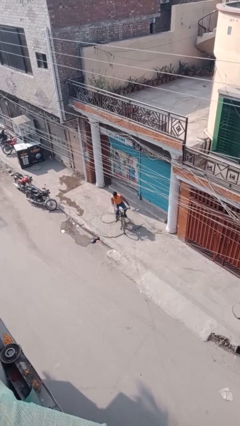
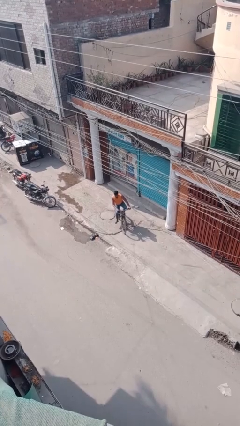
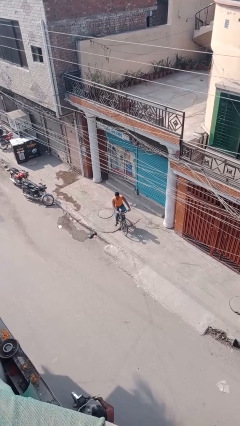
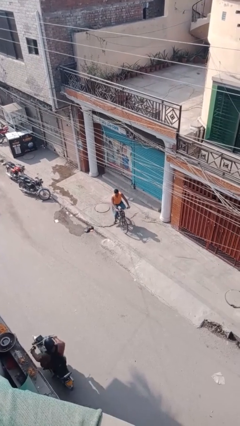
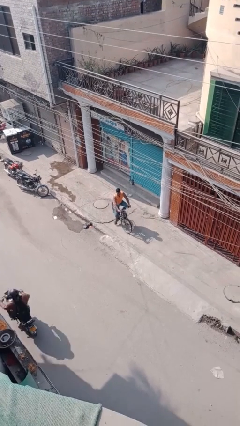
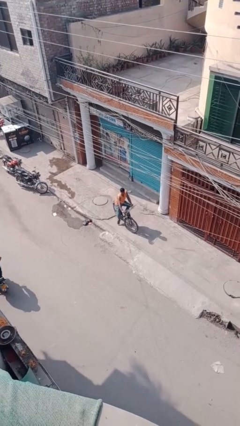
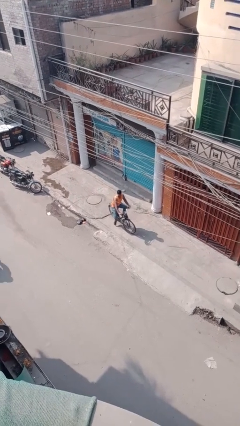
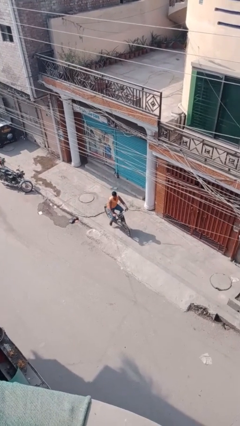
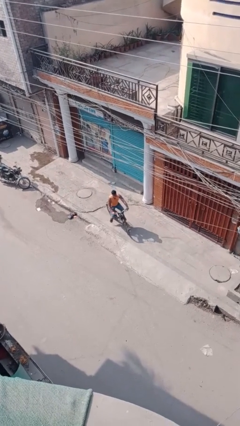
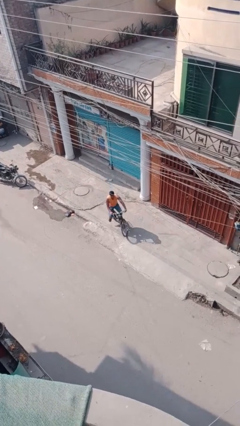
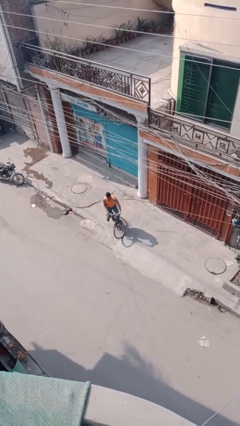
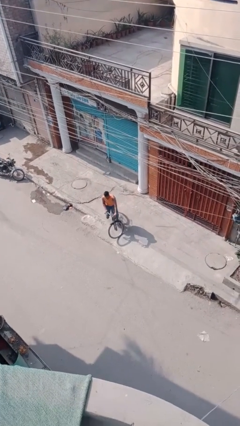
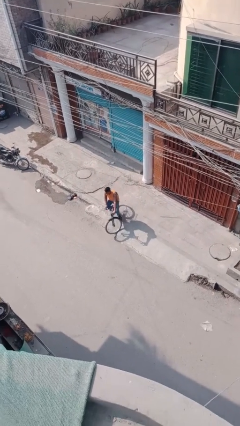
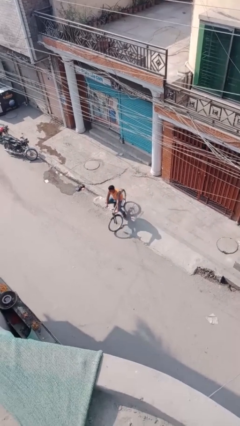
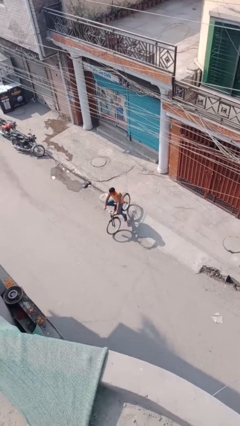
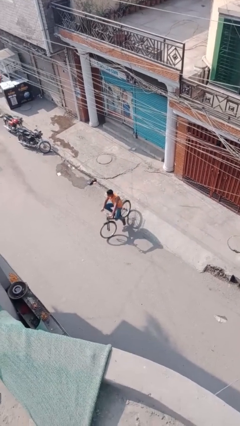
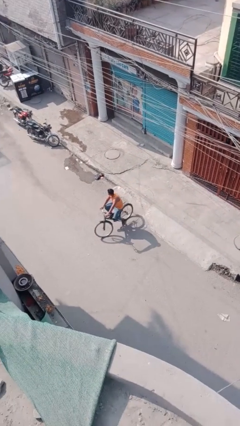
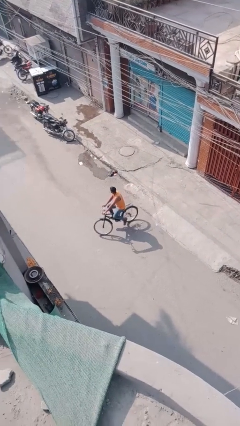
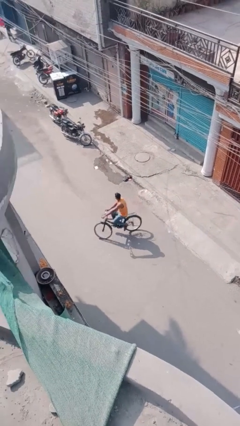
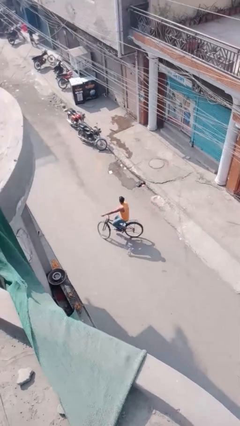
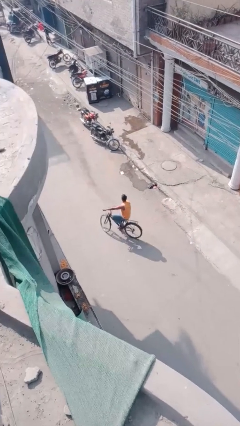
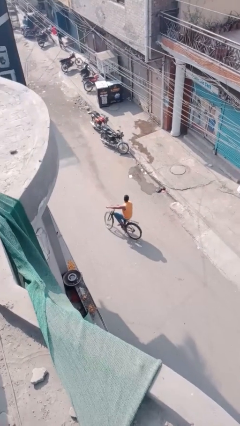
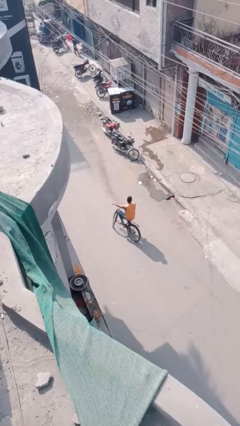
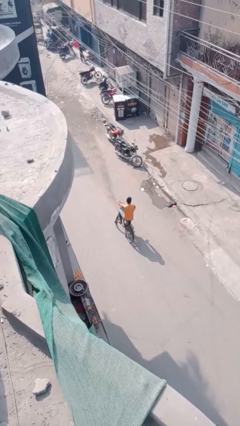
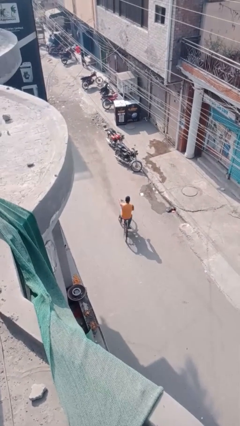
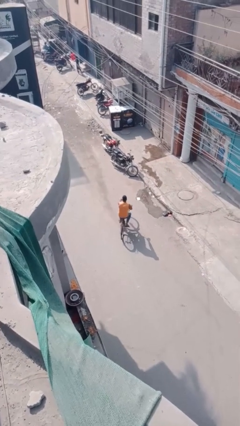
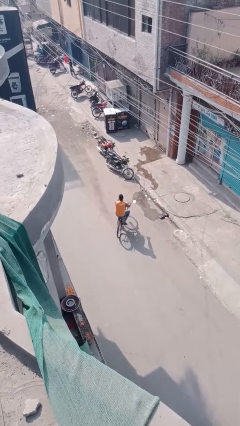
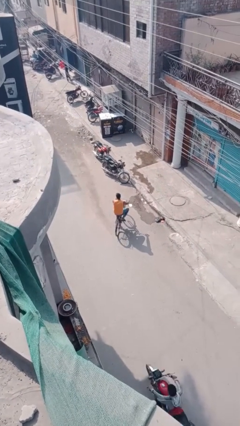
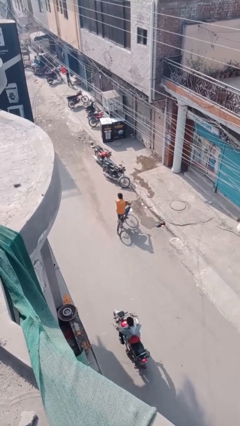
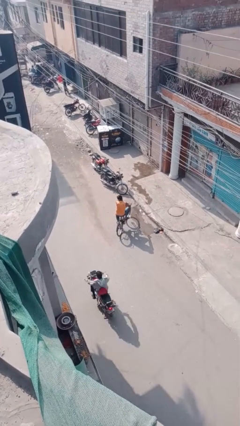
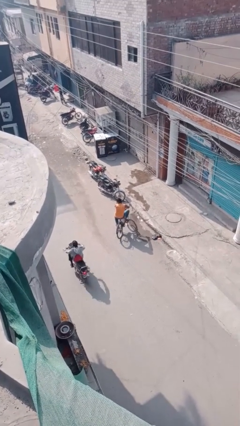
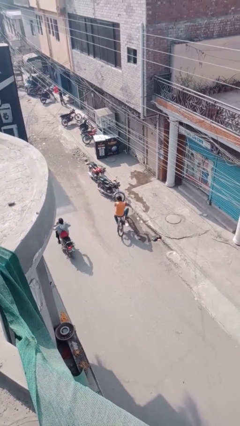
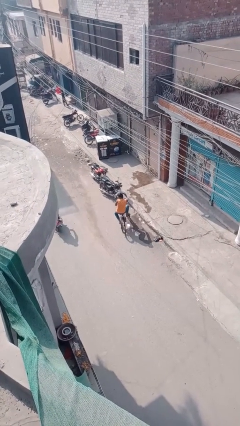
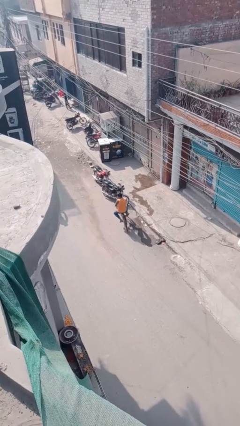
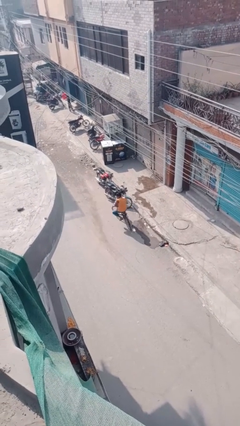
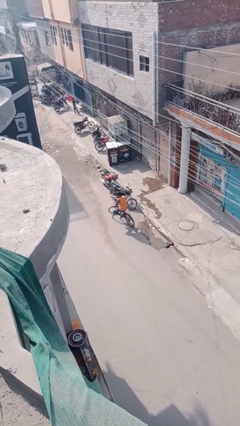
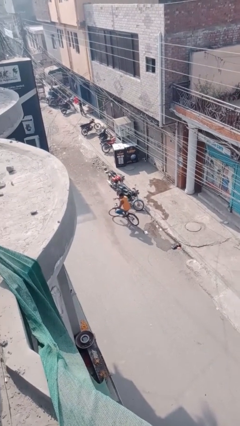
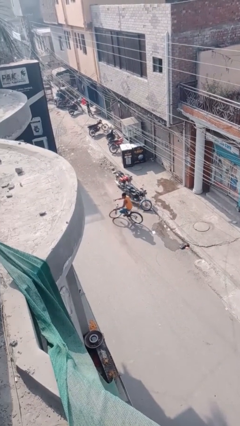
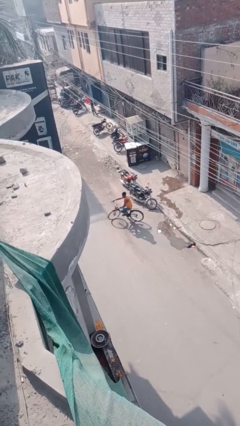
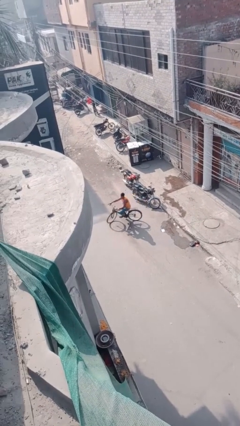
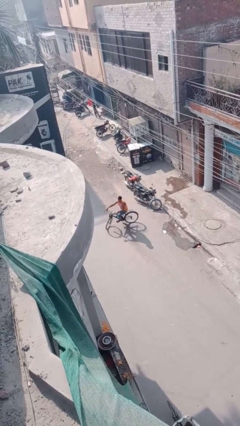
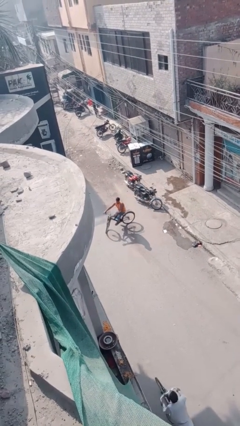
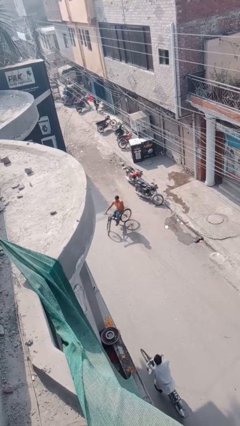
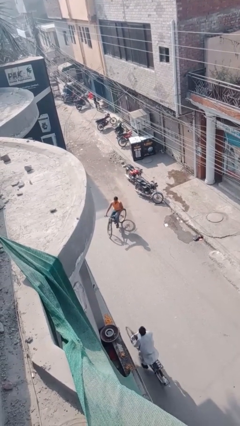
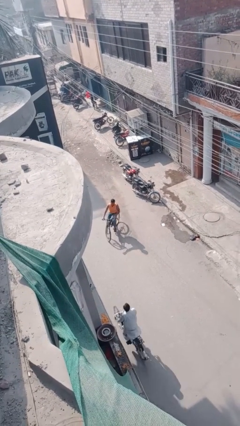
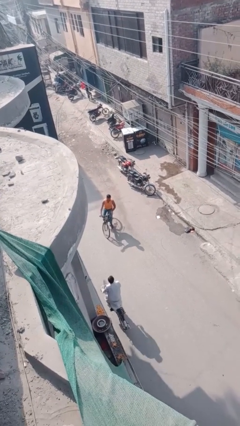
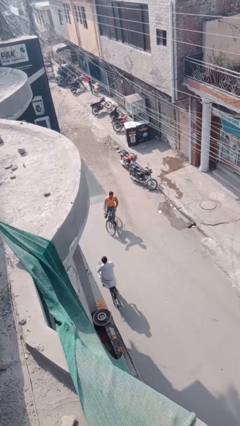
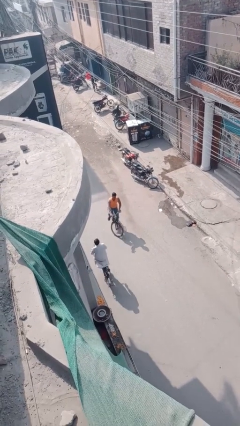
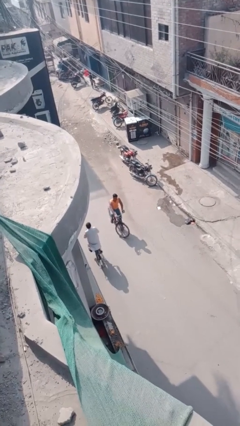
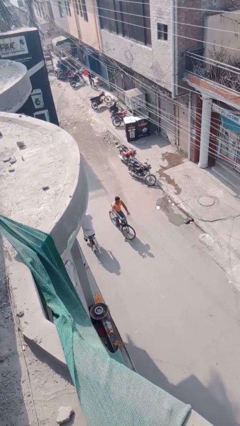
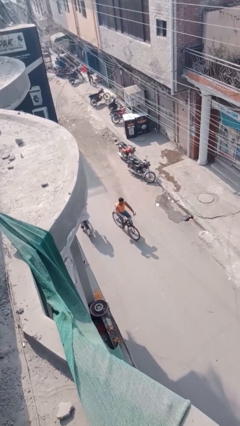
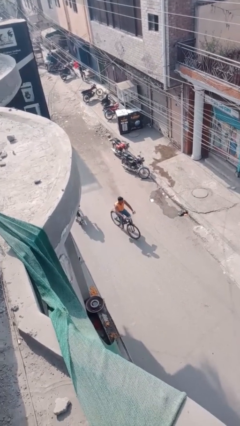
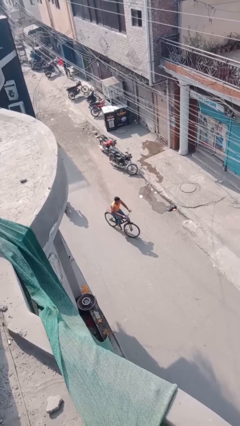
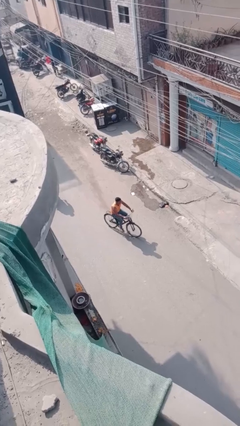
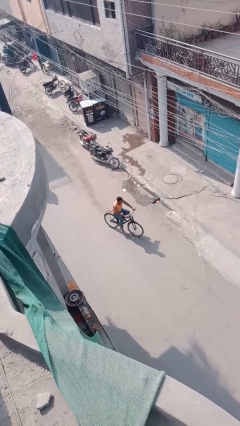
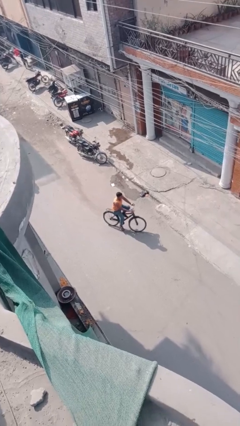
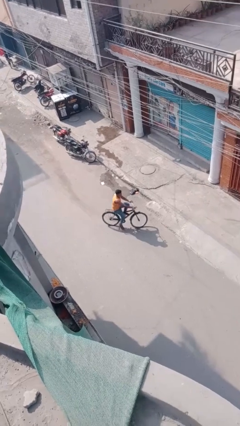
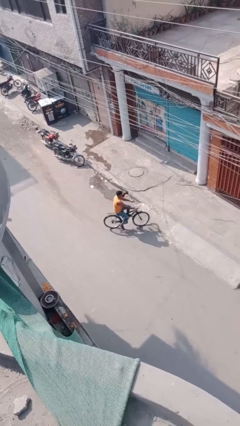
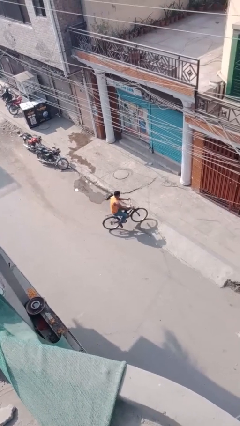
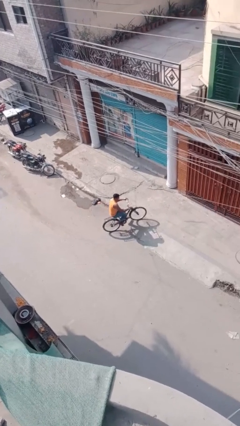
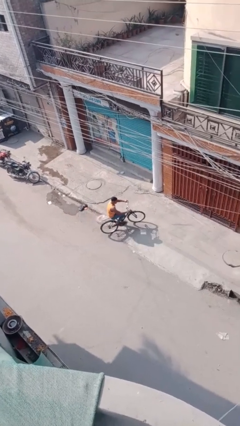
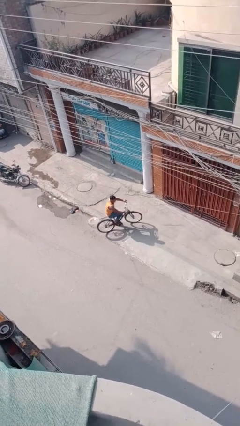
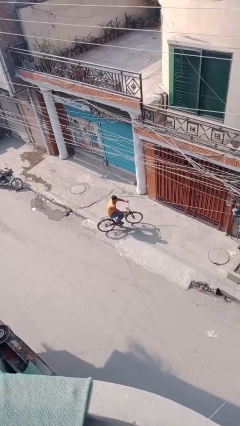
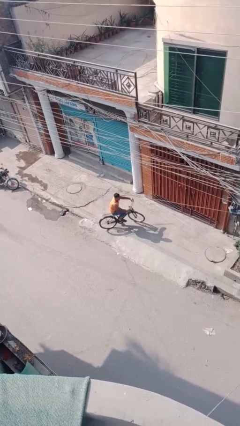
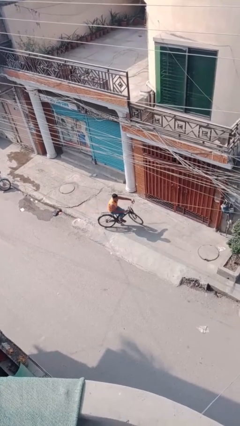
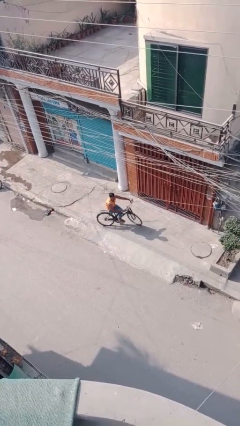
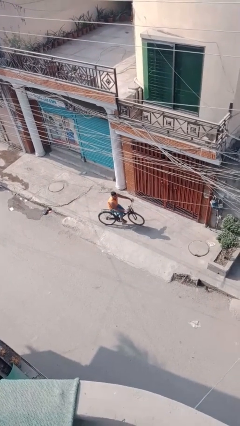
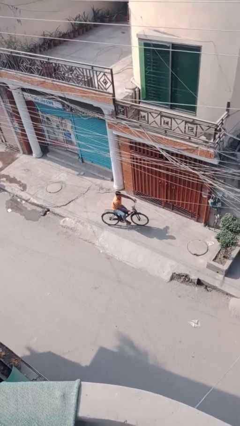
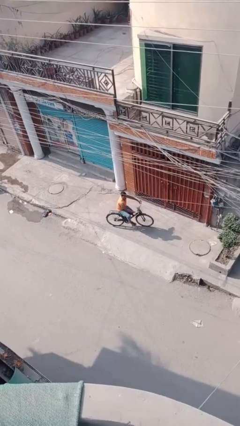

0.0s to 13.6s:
person rides bicycle

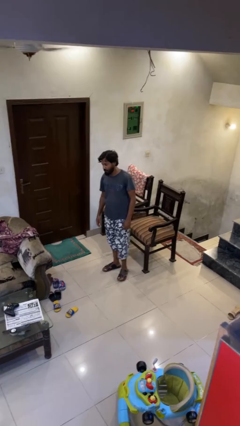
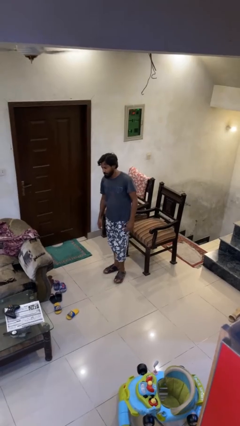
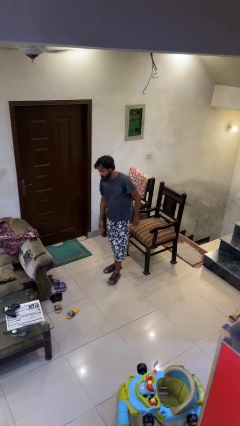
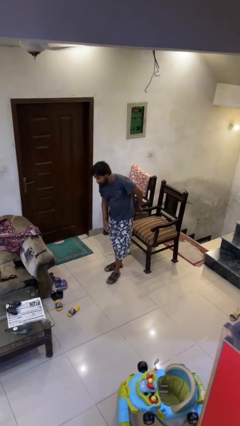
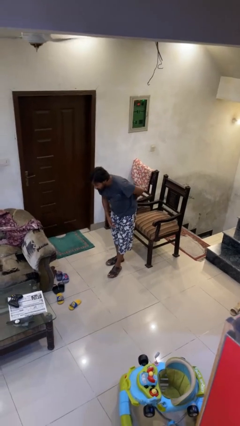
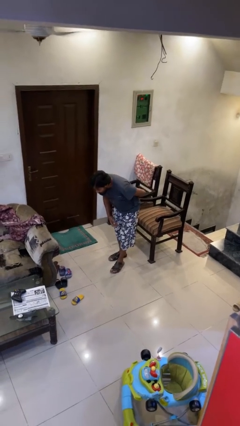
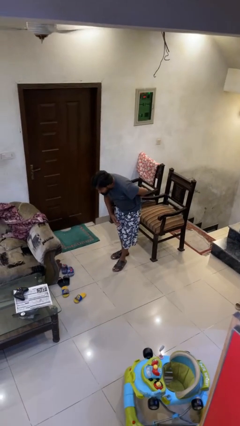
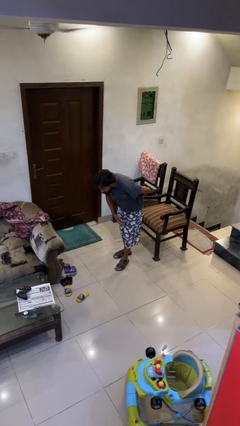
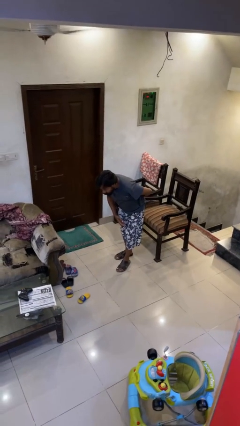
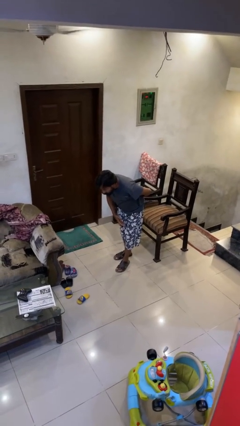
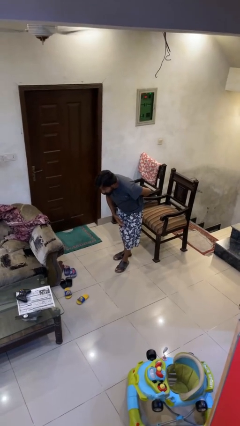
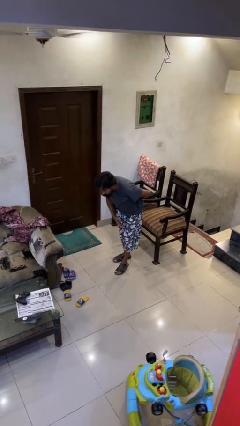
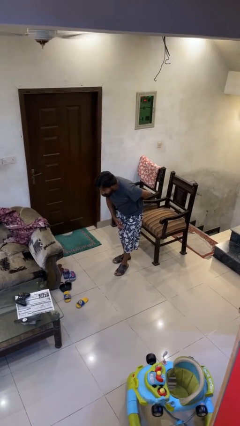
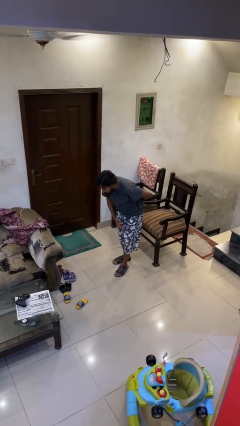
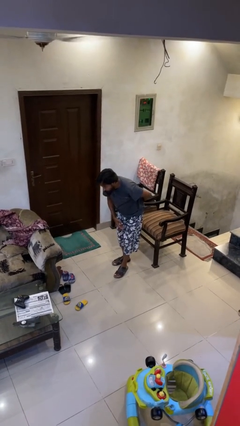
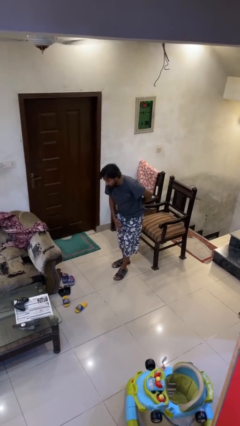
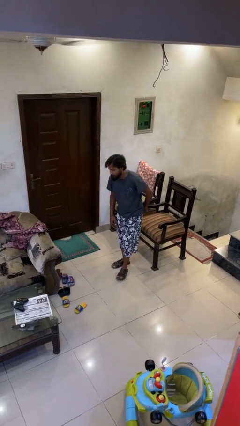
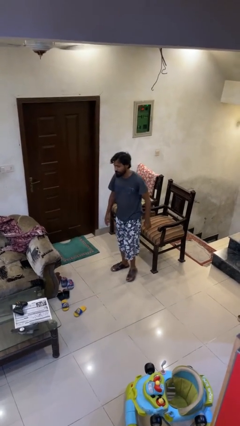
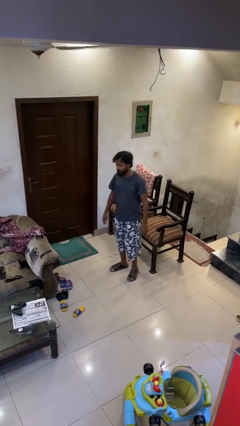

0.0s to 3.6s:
person bows

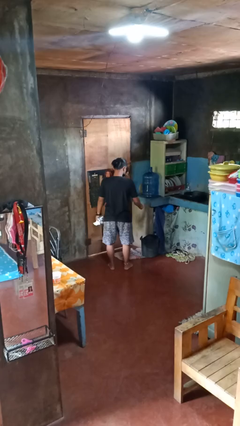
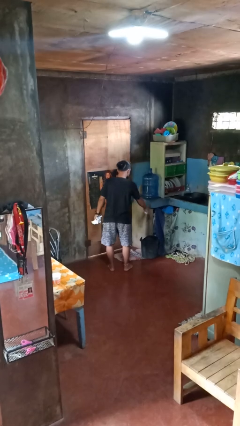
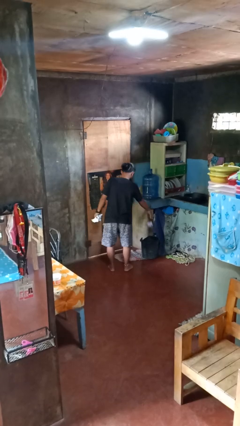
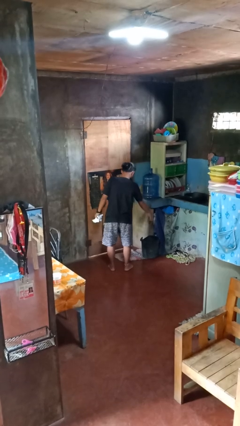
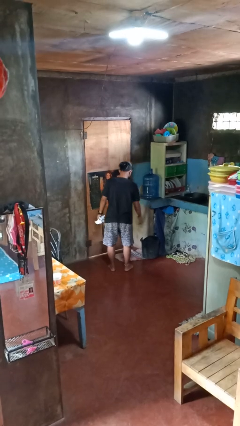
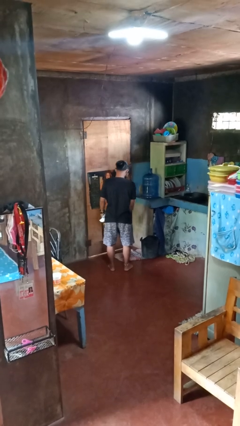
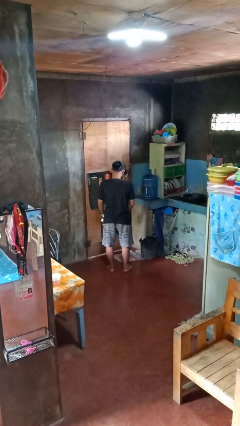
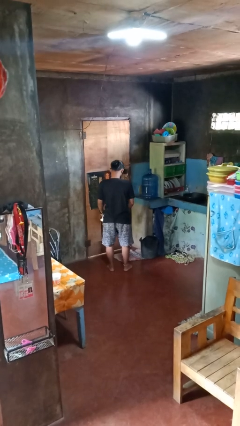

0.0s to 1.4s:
person discards trash
